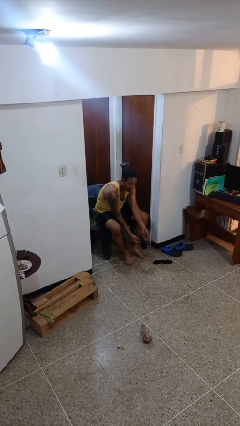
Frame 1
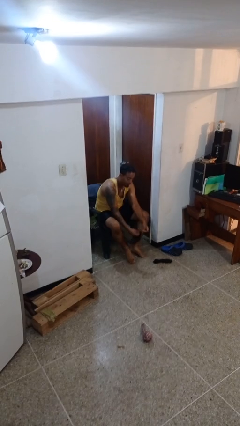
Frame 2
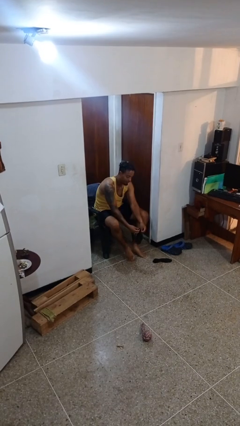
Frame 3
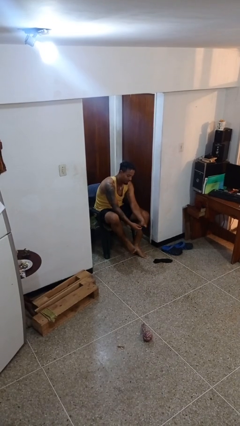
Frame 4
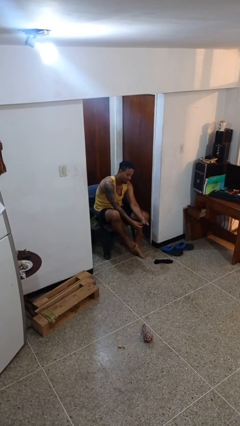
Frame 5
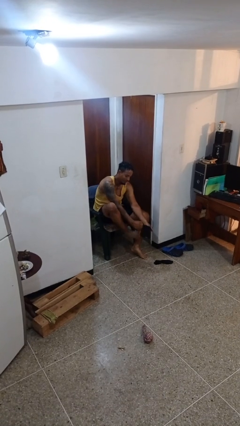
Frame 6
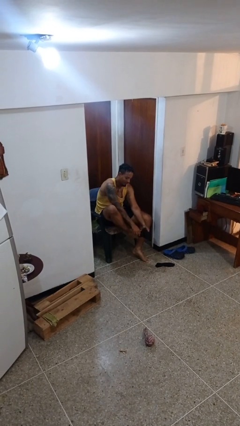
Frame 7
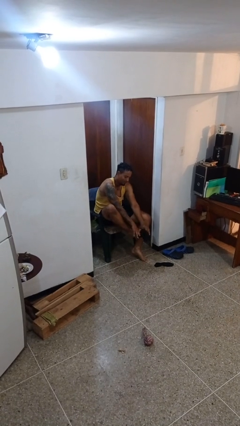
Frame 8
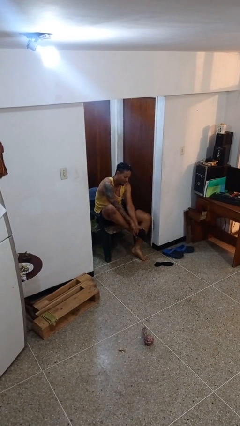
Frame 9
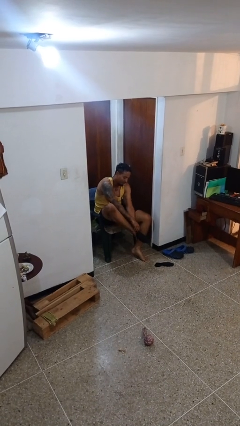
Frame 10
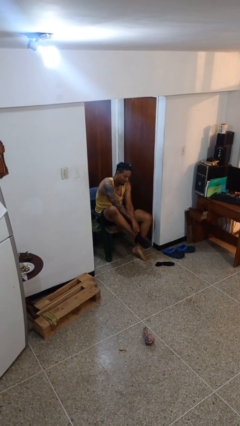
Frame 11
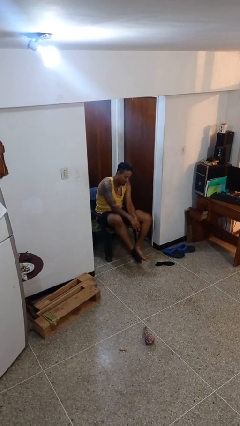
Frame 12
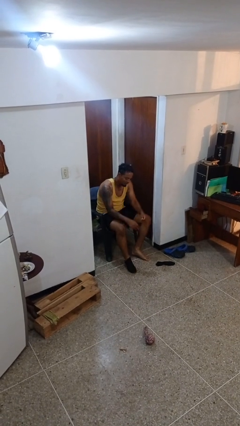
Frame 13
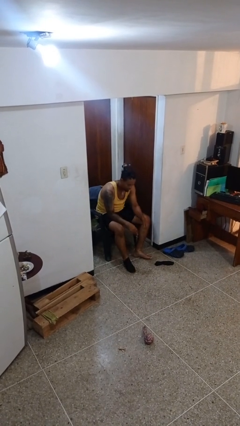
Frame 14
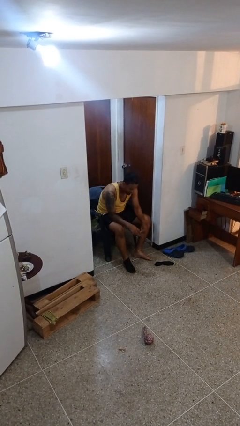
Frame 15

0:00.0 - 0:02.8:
person puts on socks

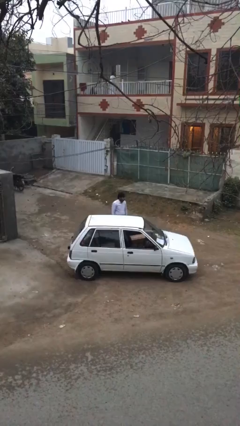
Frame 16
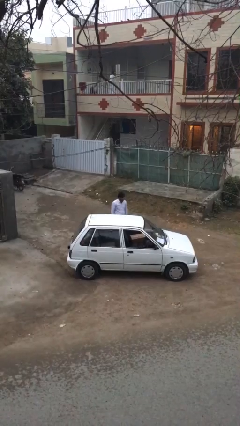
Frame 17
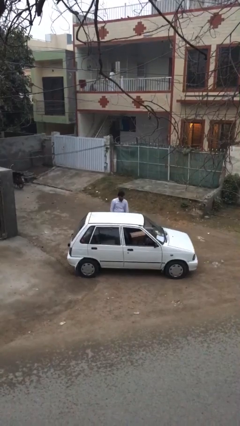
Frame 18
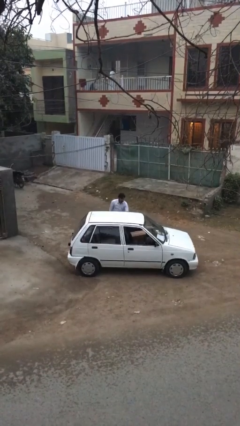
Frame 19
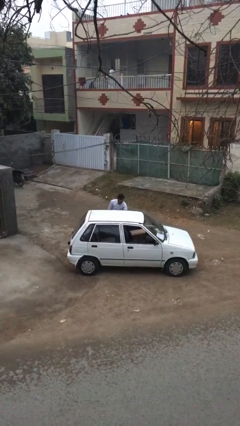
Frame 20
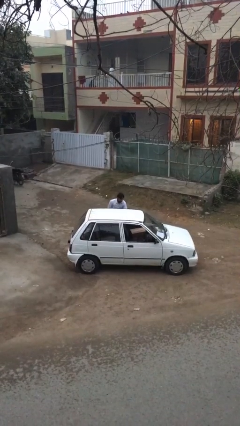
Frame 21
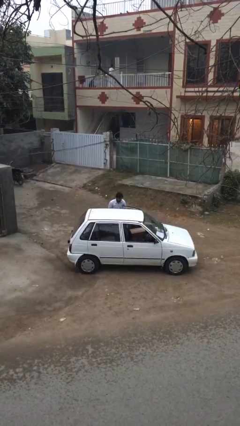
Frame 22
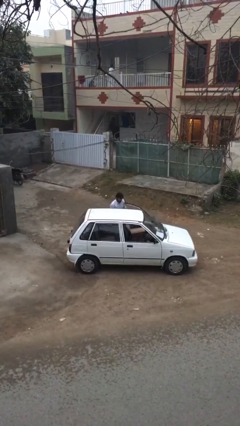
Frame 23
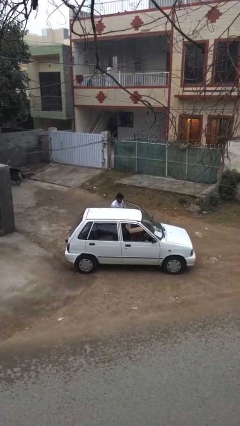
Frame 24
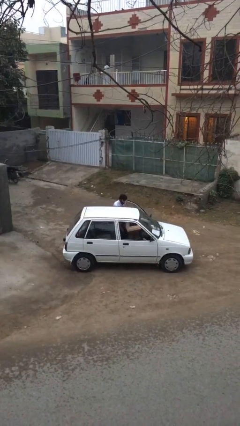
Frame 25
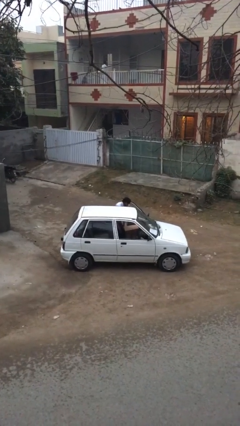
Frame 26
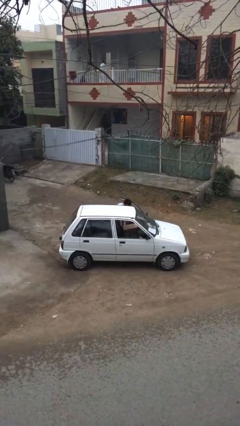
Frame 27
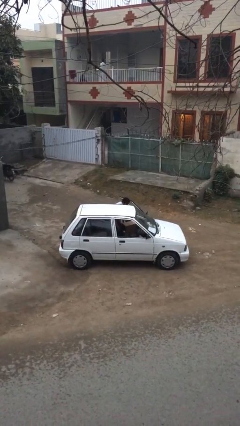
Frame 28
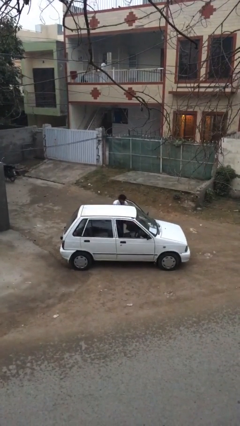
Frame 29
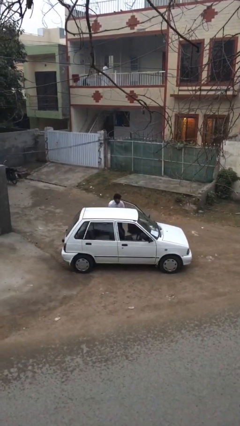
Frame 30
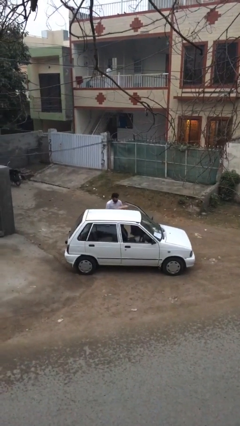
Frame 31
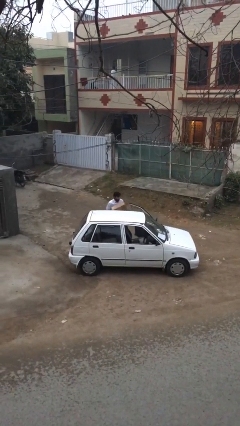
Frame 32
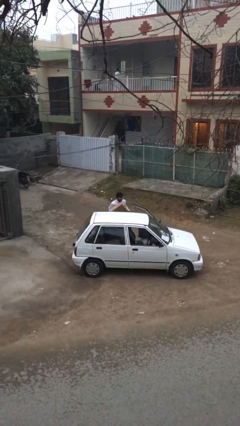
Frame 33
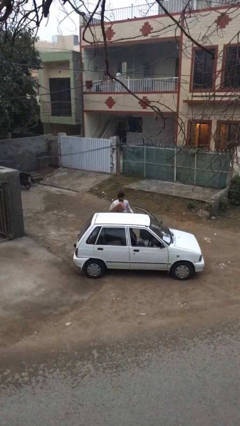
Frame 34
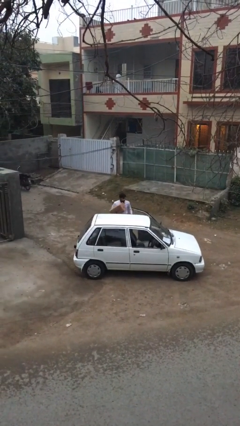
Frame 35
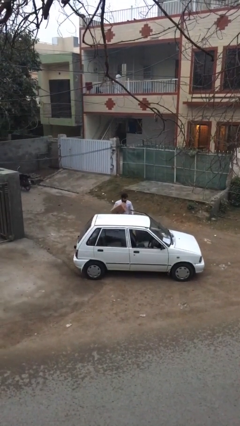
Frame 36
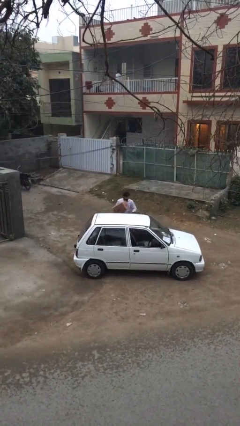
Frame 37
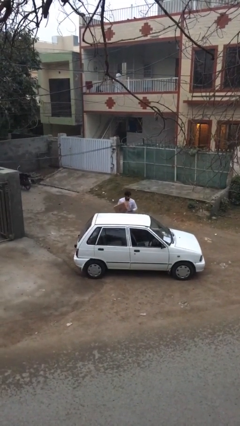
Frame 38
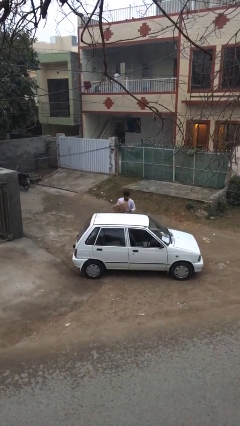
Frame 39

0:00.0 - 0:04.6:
person unloads car

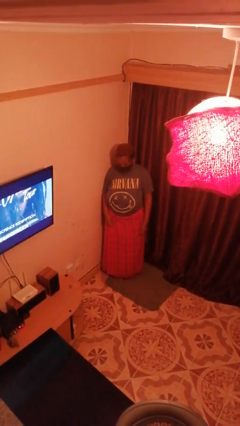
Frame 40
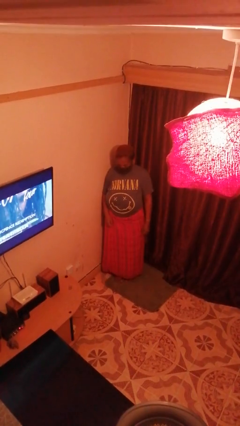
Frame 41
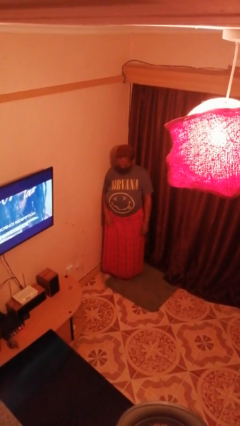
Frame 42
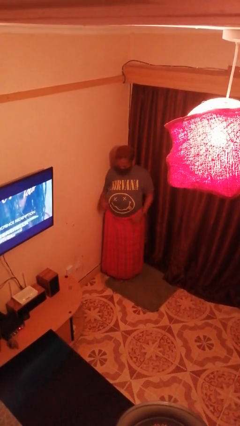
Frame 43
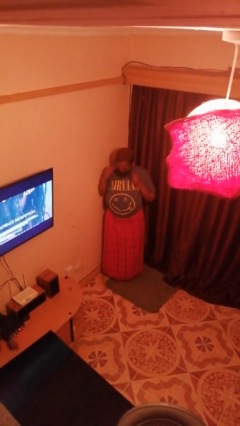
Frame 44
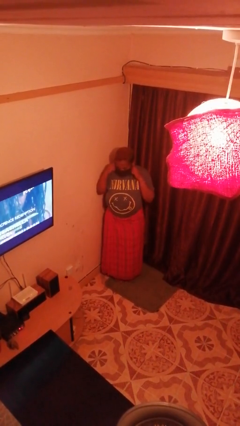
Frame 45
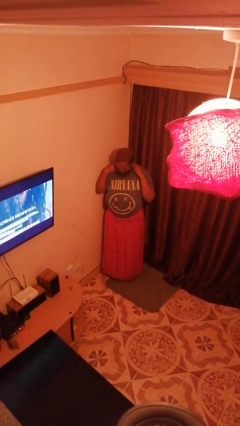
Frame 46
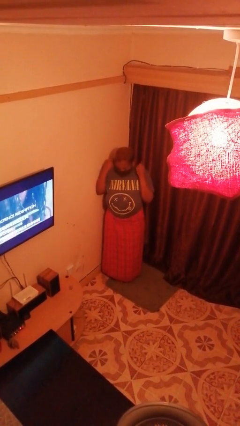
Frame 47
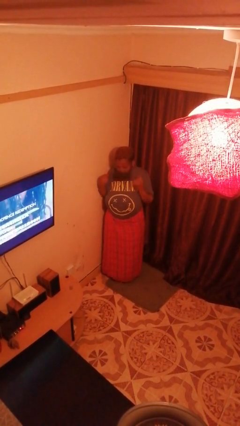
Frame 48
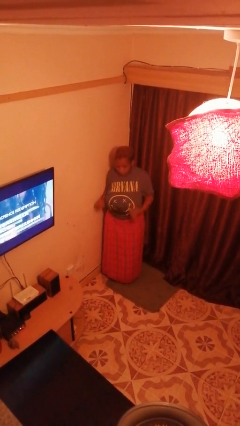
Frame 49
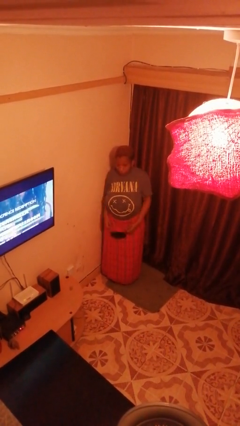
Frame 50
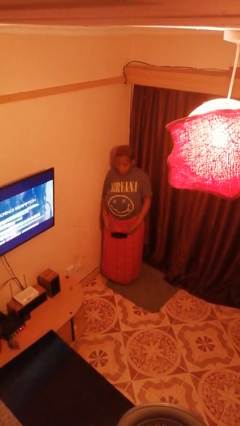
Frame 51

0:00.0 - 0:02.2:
person takes off facemask

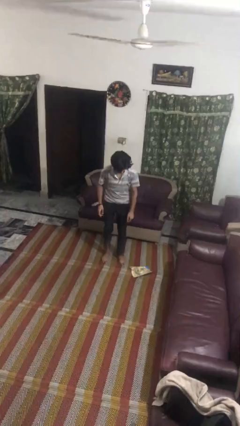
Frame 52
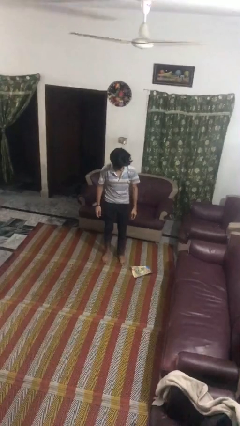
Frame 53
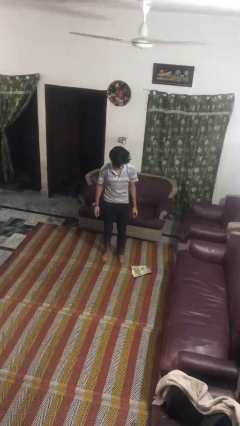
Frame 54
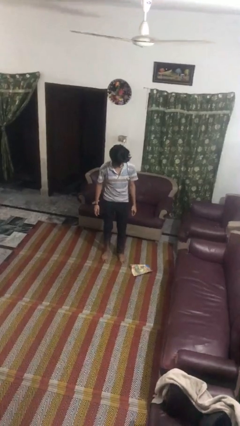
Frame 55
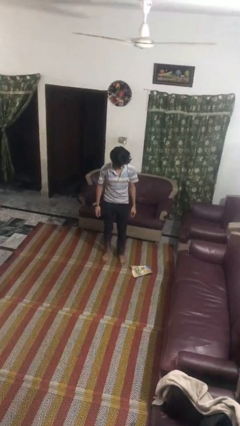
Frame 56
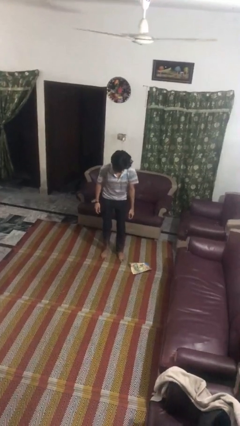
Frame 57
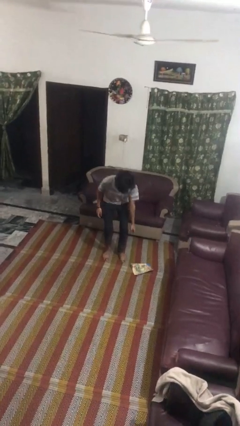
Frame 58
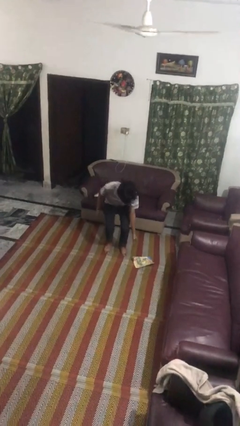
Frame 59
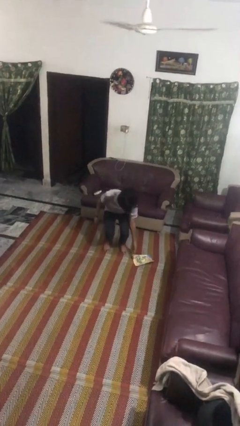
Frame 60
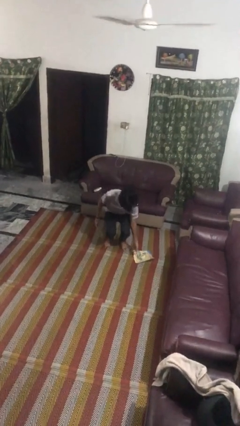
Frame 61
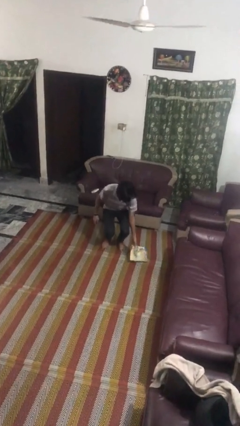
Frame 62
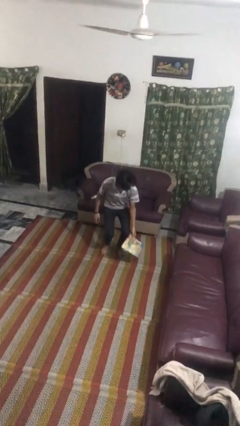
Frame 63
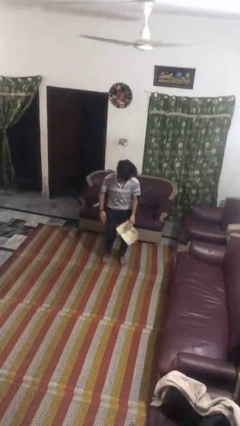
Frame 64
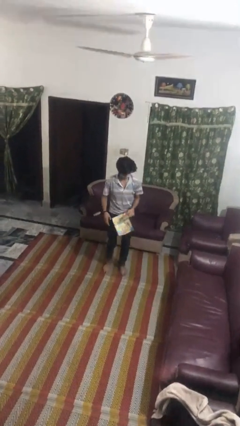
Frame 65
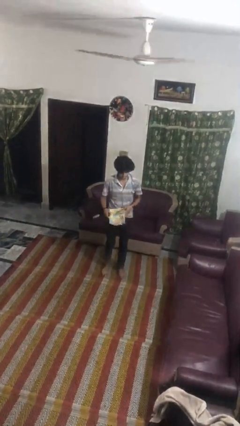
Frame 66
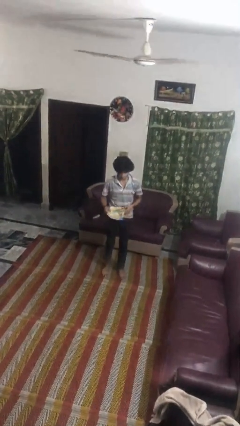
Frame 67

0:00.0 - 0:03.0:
person picks up object from floor

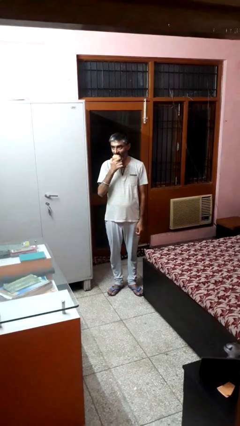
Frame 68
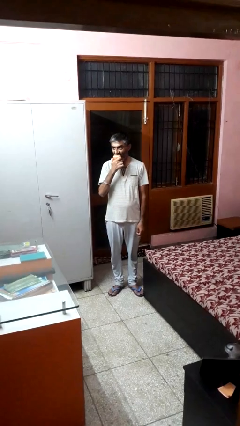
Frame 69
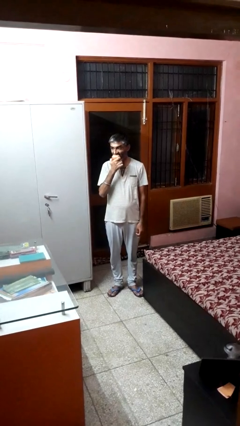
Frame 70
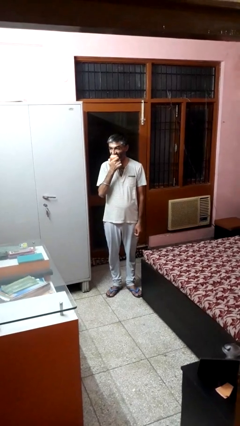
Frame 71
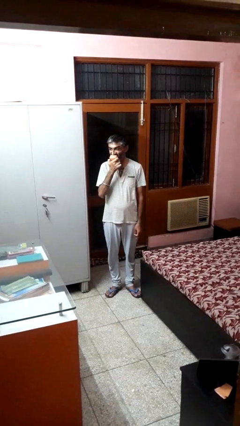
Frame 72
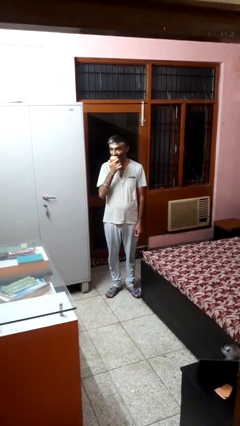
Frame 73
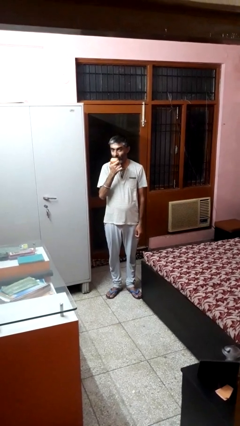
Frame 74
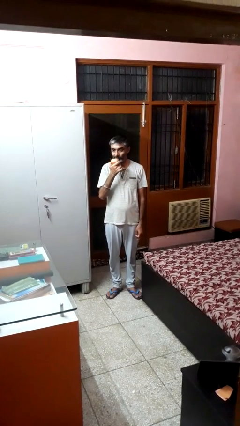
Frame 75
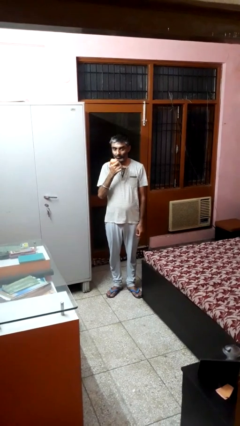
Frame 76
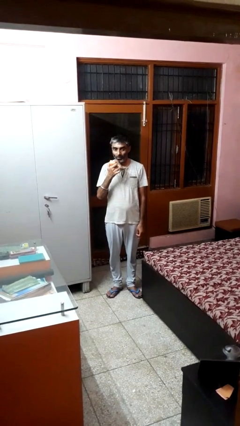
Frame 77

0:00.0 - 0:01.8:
person eats apple

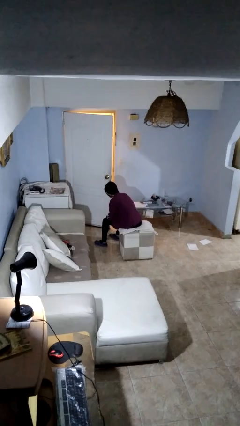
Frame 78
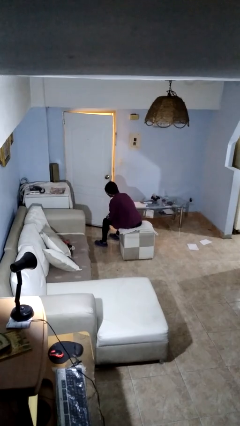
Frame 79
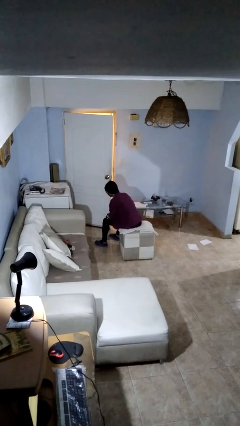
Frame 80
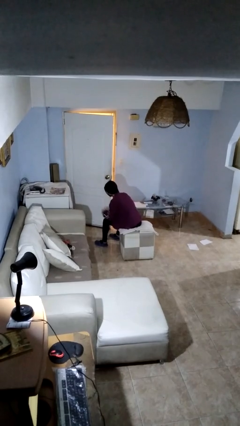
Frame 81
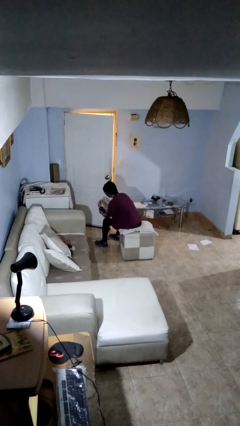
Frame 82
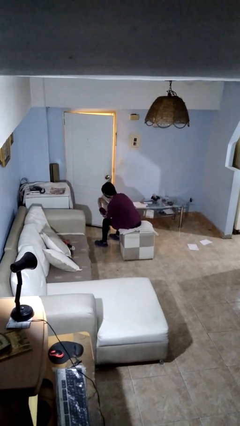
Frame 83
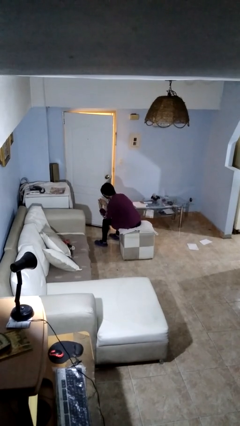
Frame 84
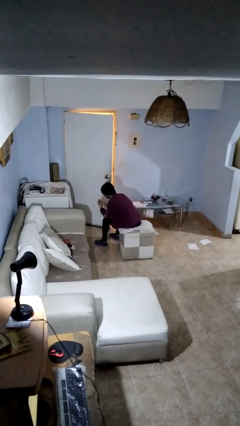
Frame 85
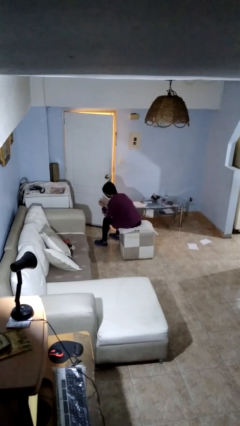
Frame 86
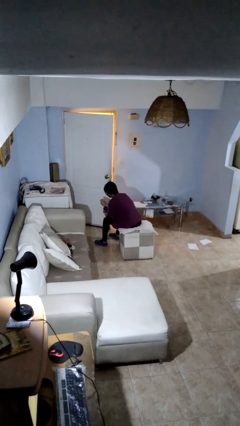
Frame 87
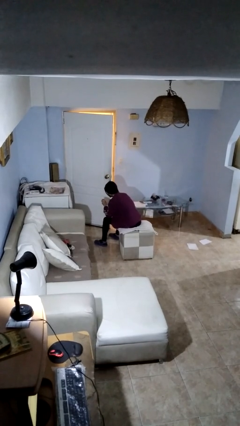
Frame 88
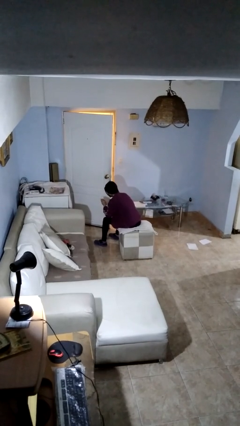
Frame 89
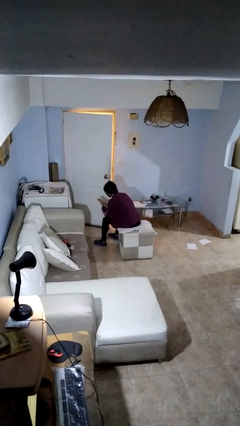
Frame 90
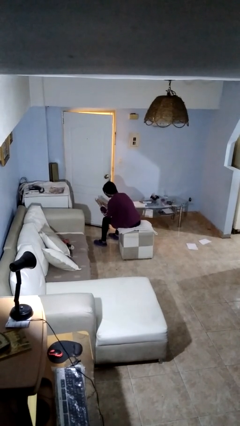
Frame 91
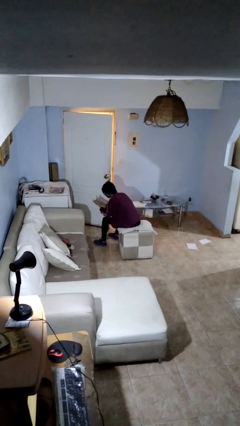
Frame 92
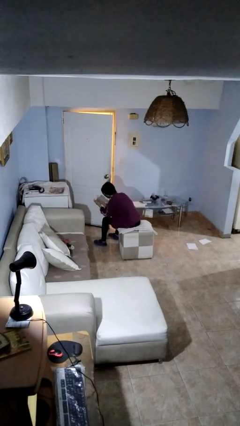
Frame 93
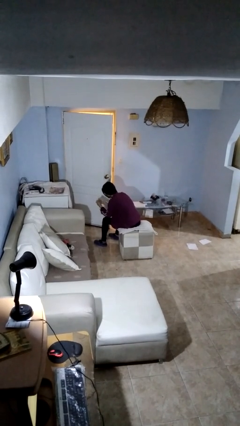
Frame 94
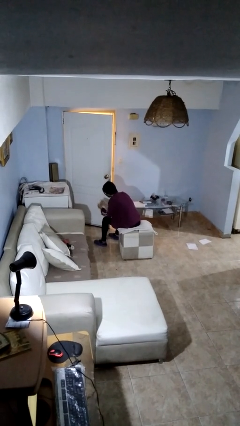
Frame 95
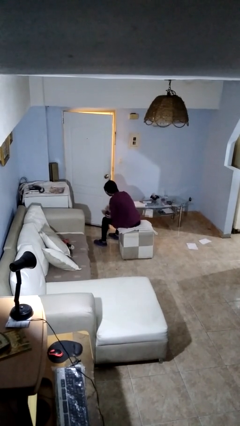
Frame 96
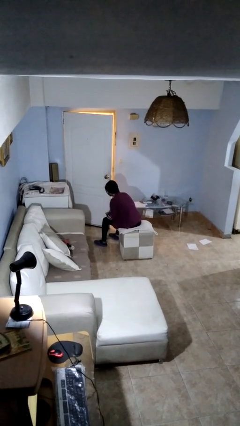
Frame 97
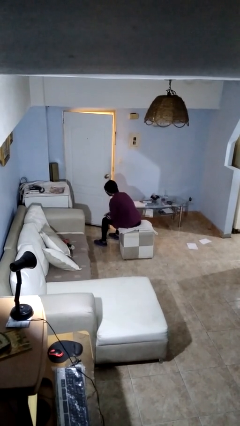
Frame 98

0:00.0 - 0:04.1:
person looks at hands in lap
